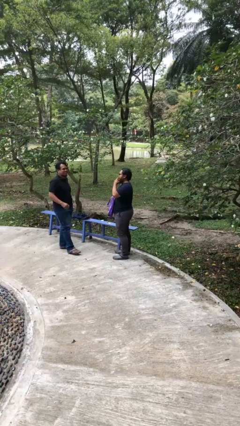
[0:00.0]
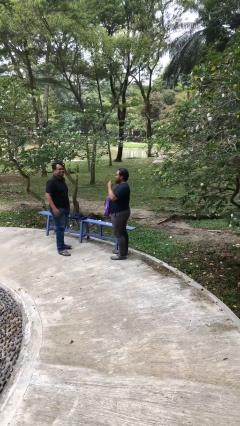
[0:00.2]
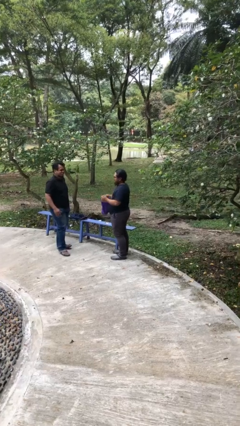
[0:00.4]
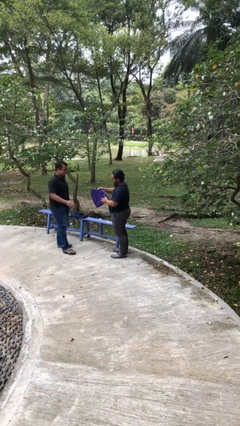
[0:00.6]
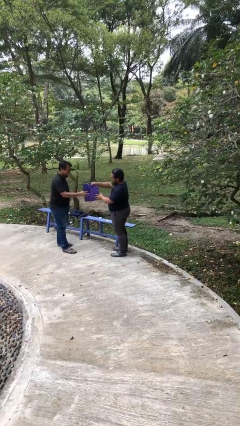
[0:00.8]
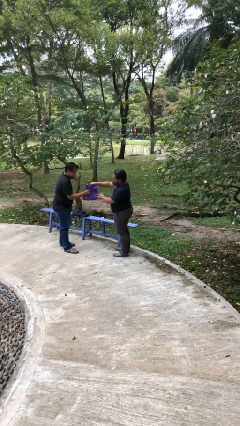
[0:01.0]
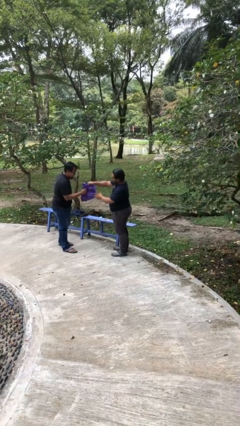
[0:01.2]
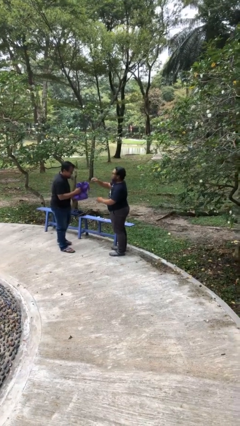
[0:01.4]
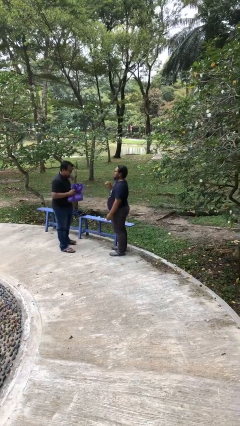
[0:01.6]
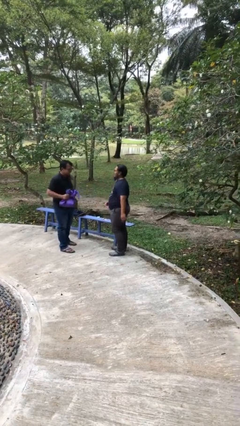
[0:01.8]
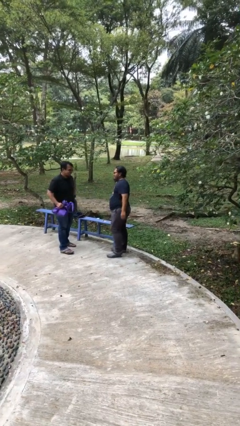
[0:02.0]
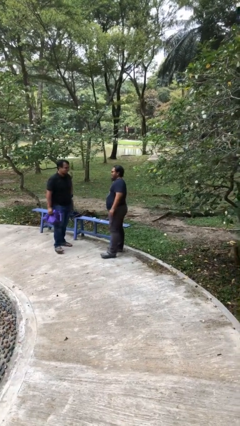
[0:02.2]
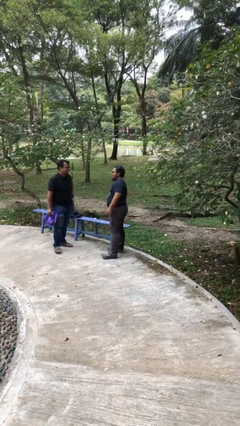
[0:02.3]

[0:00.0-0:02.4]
person transfers object to person

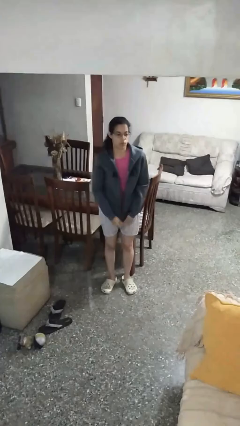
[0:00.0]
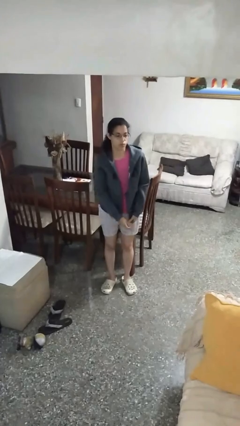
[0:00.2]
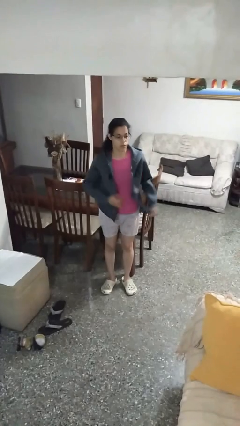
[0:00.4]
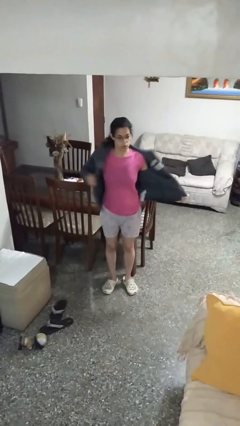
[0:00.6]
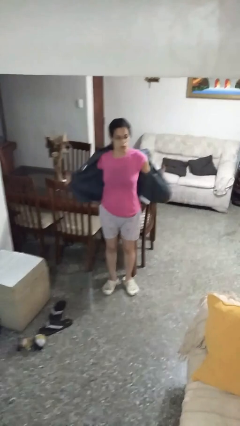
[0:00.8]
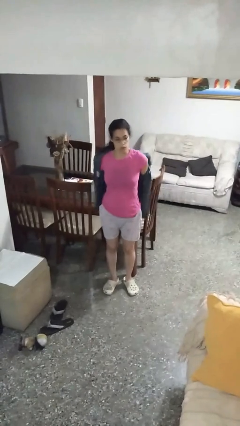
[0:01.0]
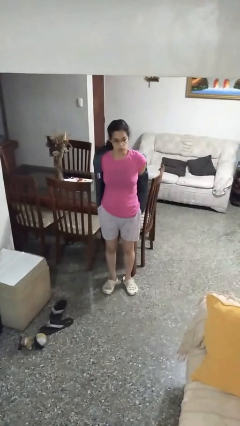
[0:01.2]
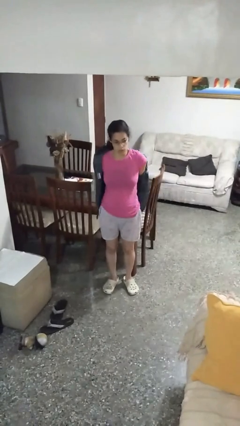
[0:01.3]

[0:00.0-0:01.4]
person unzips jacket

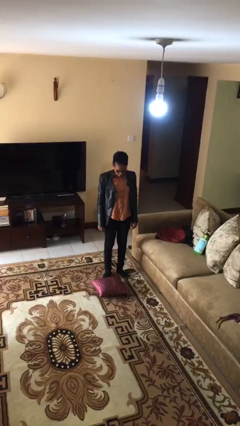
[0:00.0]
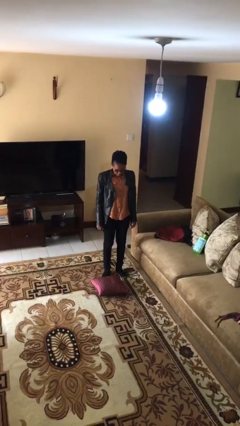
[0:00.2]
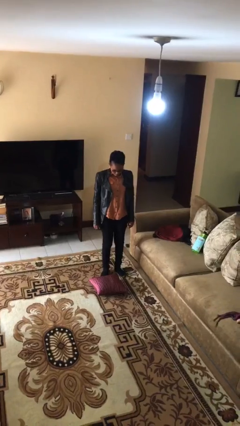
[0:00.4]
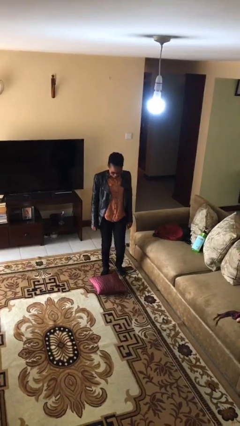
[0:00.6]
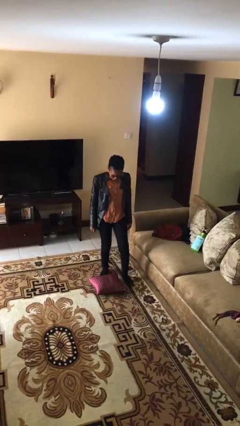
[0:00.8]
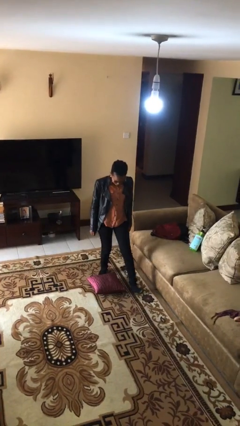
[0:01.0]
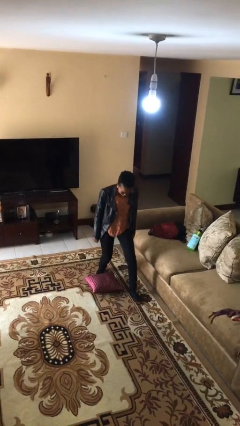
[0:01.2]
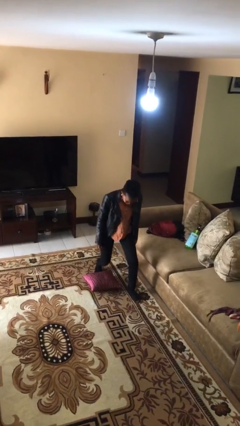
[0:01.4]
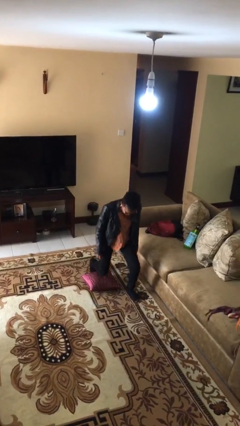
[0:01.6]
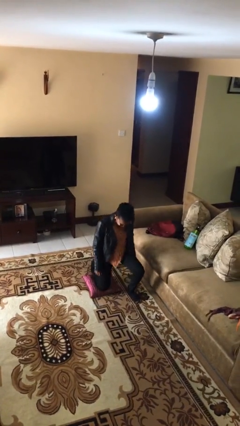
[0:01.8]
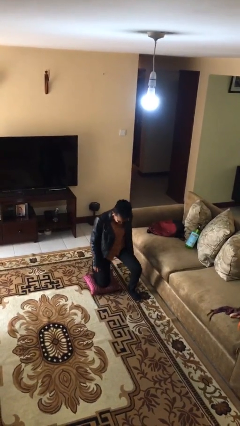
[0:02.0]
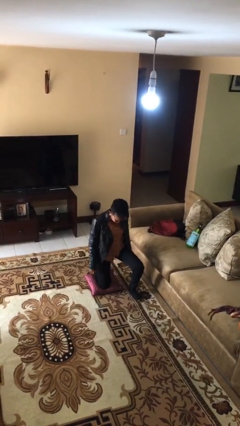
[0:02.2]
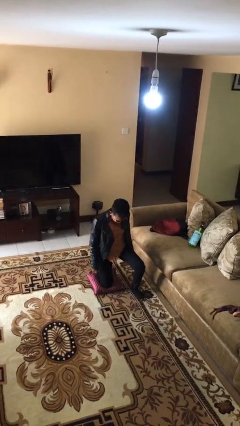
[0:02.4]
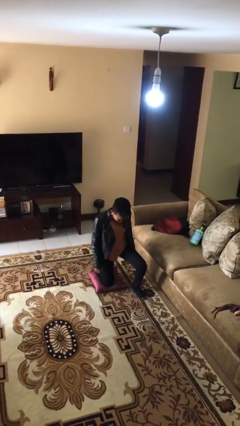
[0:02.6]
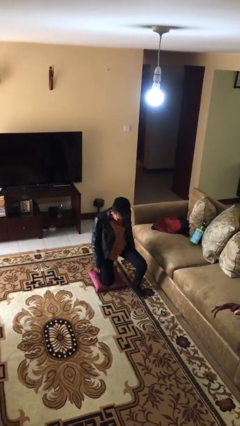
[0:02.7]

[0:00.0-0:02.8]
person kneels

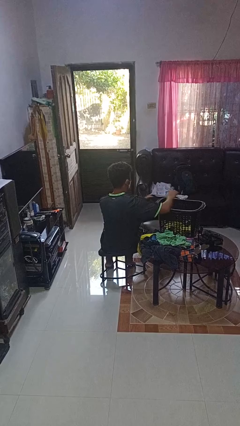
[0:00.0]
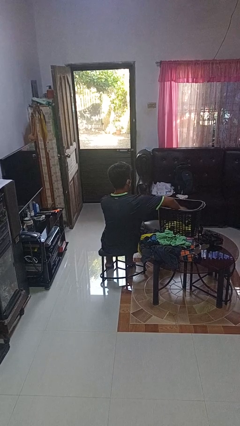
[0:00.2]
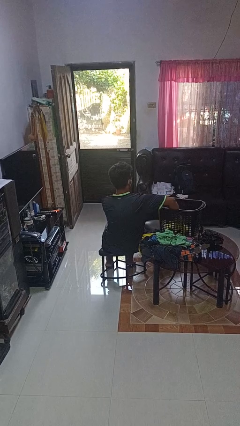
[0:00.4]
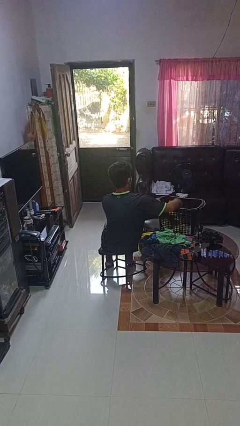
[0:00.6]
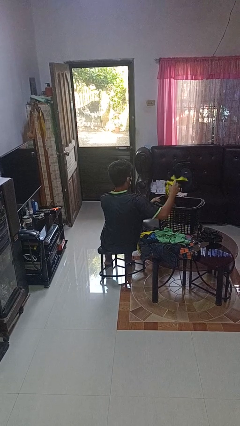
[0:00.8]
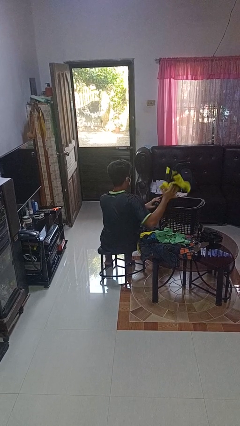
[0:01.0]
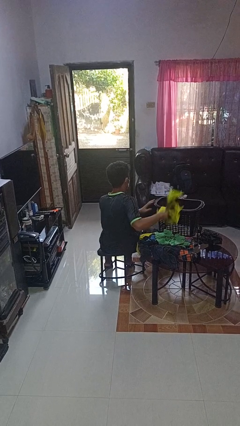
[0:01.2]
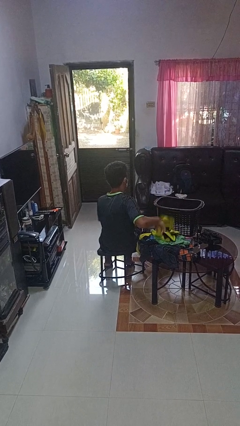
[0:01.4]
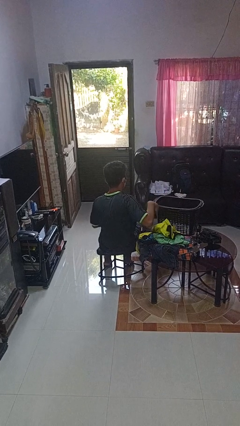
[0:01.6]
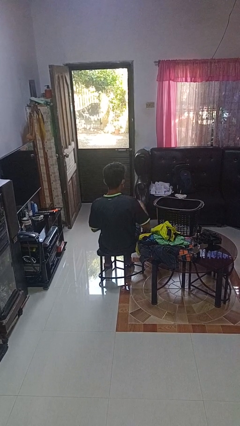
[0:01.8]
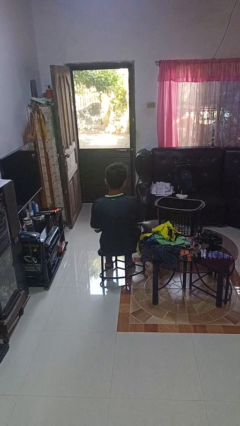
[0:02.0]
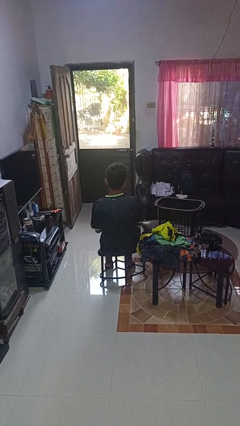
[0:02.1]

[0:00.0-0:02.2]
person takes object from basket

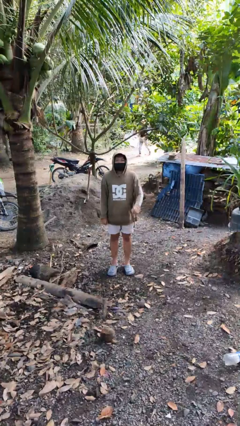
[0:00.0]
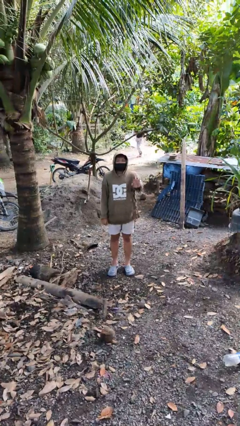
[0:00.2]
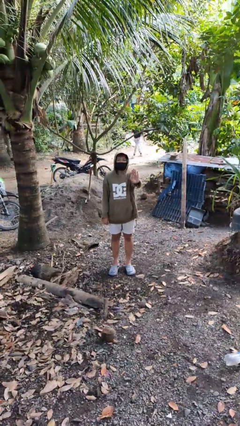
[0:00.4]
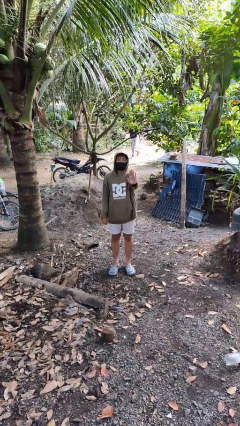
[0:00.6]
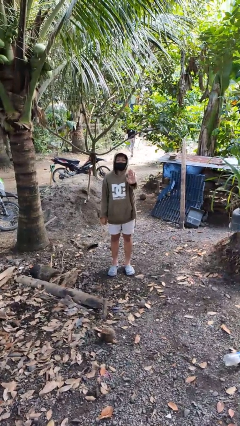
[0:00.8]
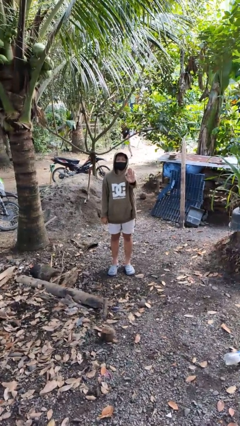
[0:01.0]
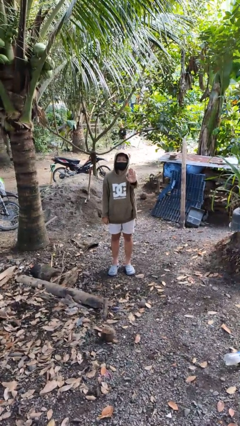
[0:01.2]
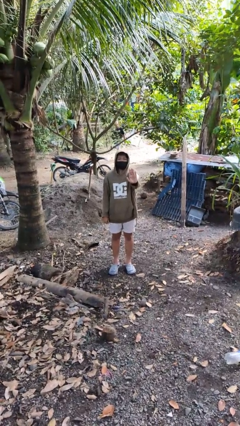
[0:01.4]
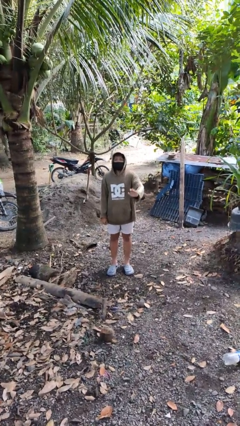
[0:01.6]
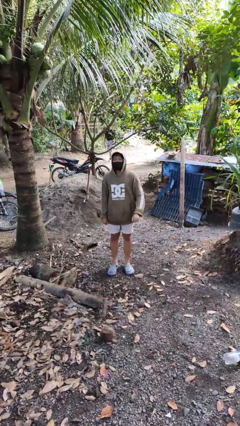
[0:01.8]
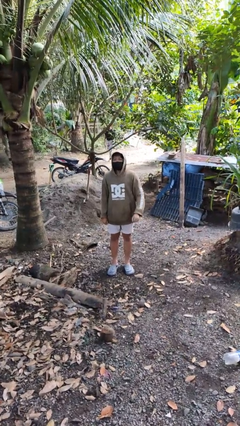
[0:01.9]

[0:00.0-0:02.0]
person gestures stop

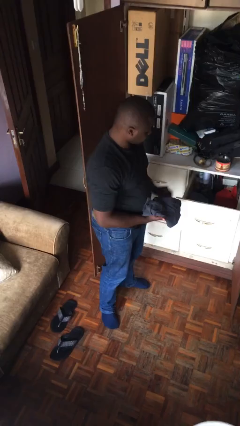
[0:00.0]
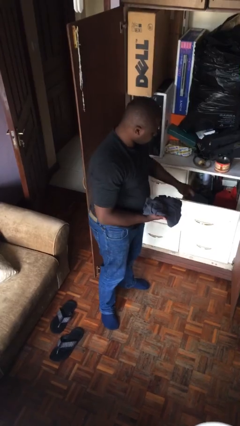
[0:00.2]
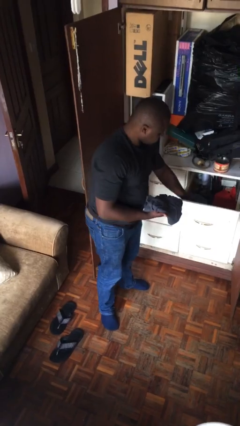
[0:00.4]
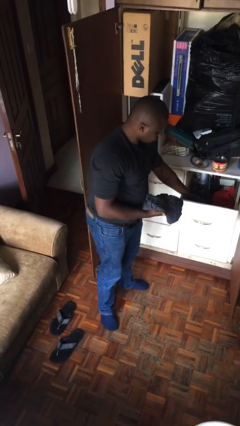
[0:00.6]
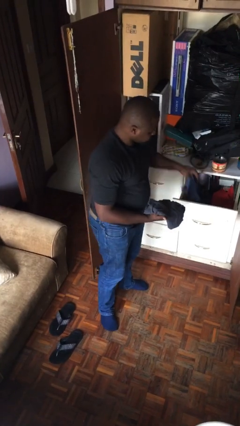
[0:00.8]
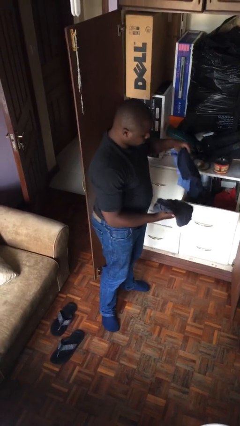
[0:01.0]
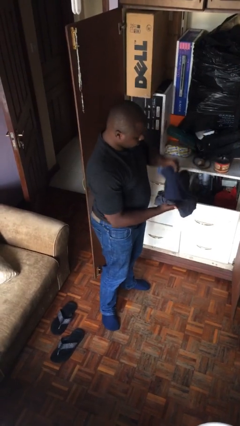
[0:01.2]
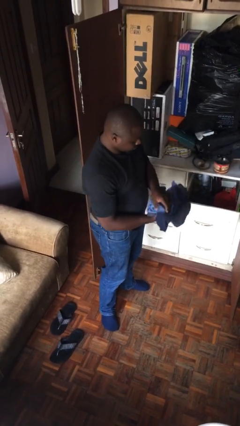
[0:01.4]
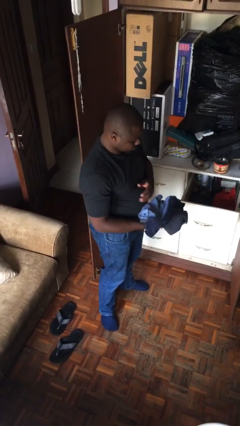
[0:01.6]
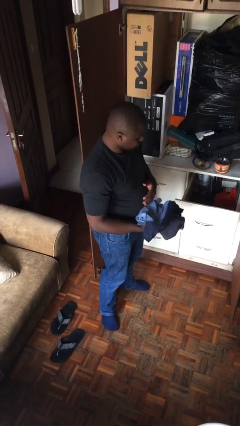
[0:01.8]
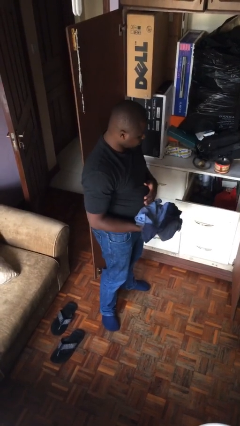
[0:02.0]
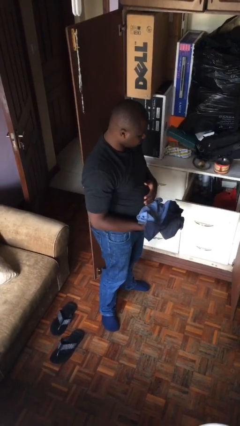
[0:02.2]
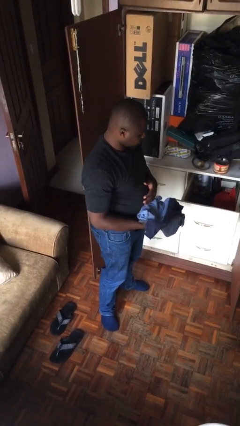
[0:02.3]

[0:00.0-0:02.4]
person takes clothes from dresser

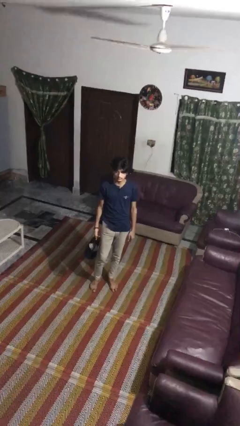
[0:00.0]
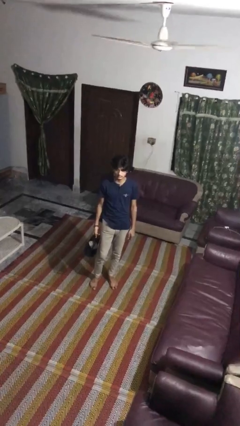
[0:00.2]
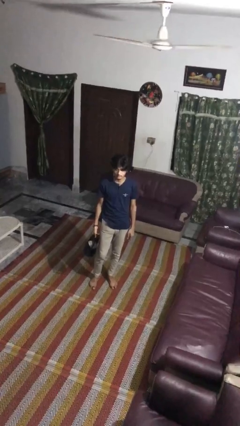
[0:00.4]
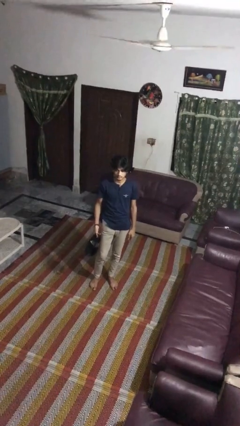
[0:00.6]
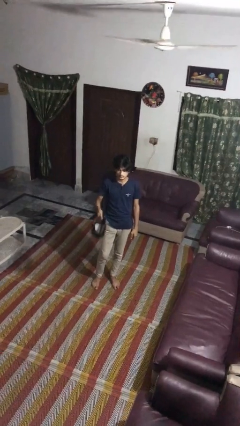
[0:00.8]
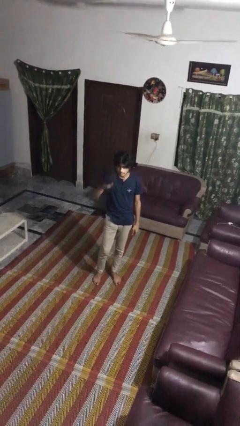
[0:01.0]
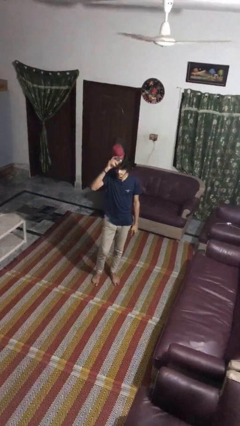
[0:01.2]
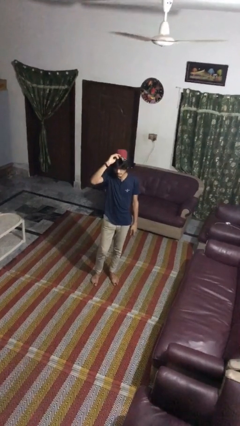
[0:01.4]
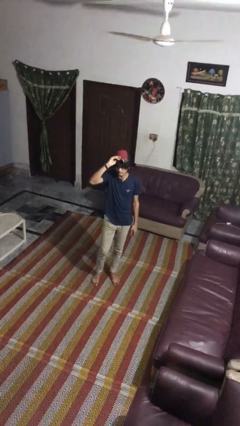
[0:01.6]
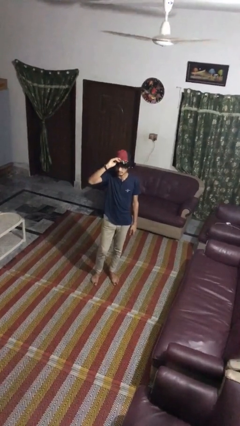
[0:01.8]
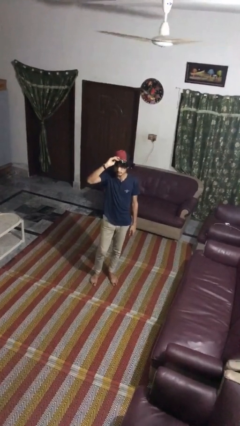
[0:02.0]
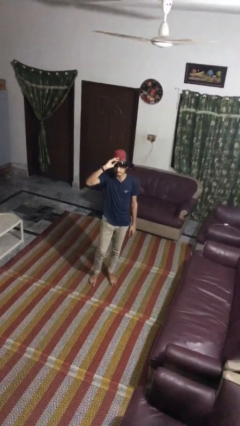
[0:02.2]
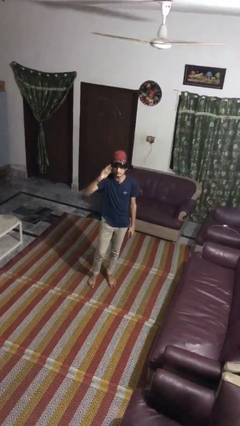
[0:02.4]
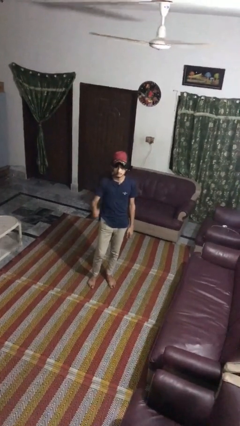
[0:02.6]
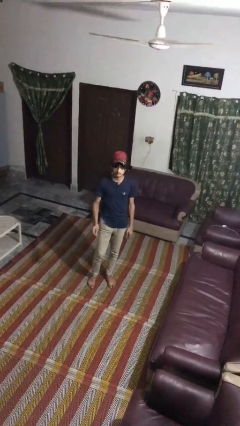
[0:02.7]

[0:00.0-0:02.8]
person puts on hat

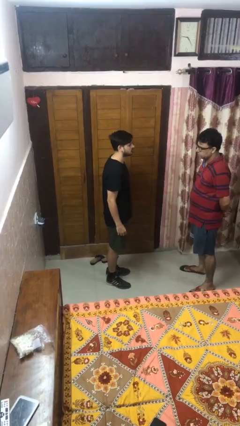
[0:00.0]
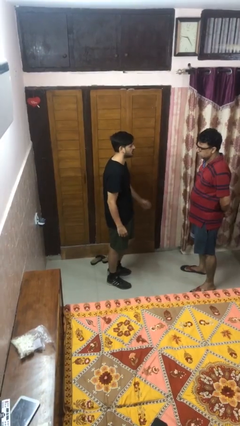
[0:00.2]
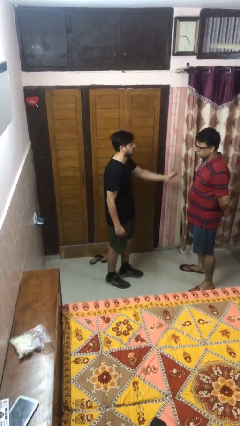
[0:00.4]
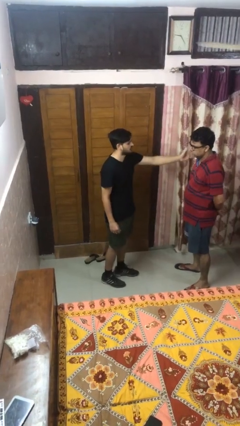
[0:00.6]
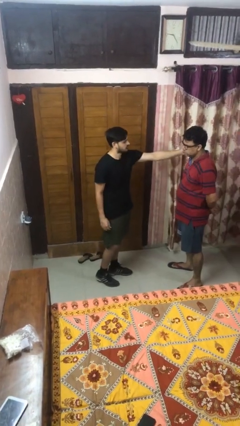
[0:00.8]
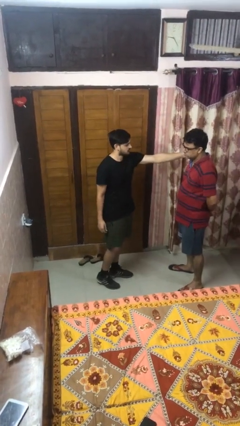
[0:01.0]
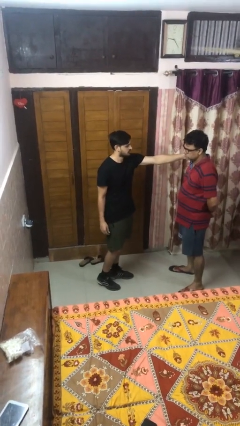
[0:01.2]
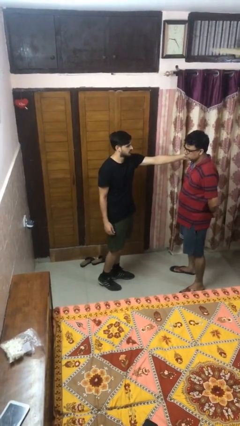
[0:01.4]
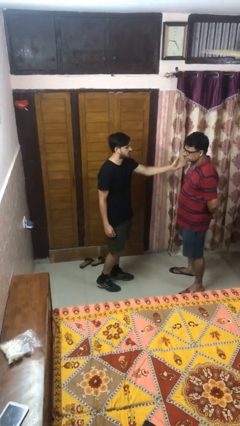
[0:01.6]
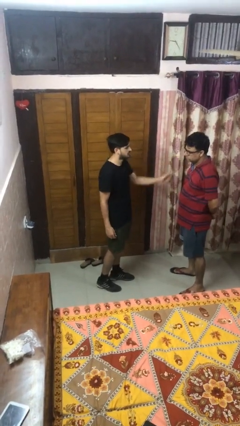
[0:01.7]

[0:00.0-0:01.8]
person touches face of person
